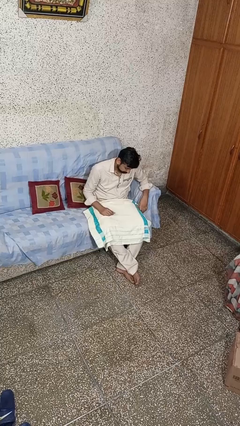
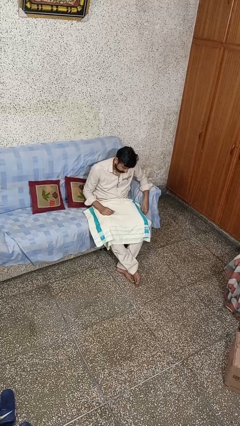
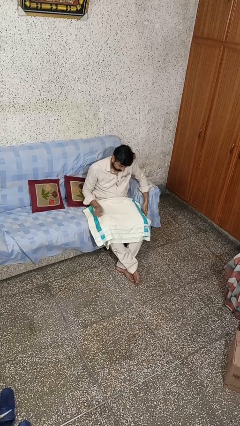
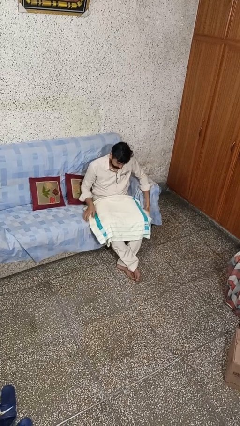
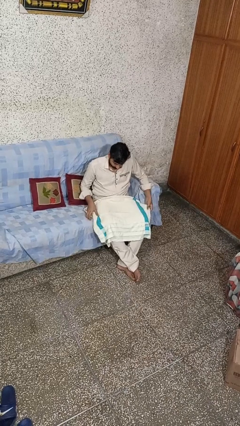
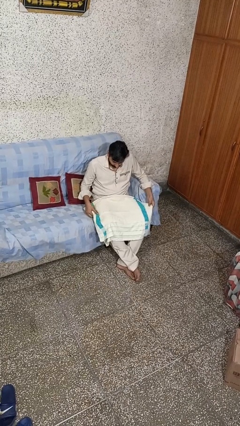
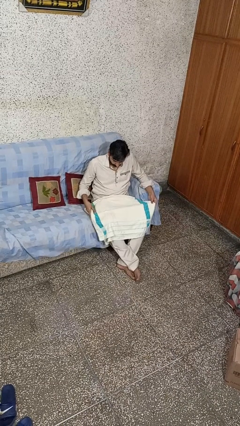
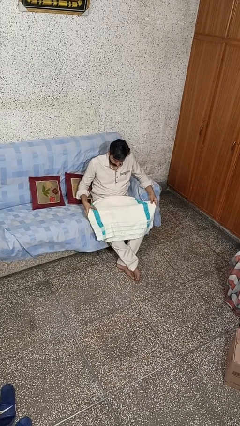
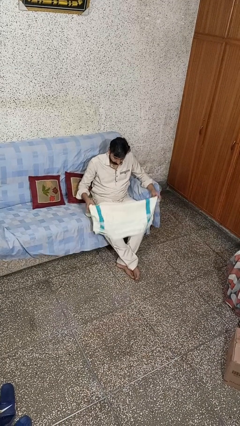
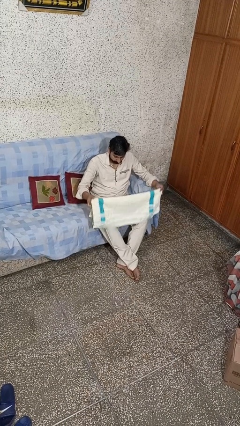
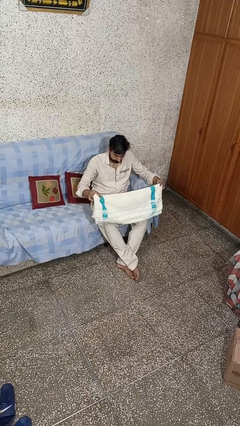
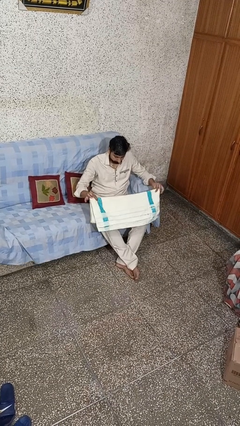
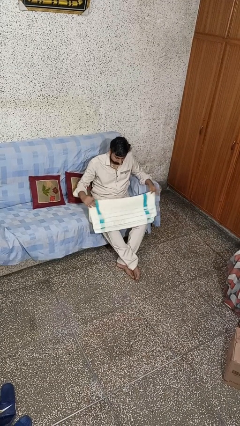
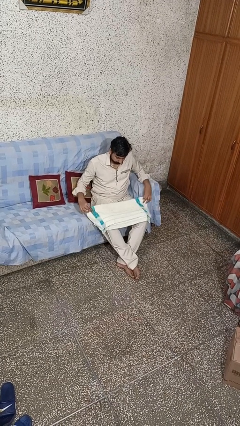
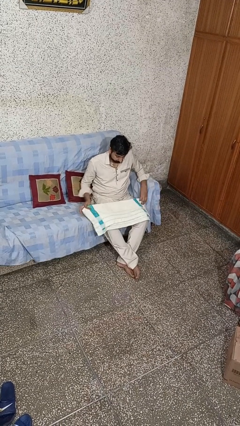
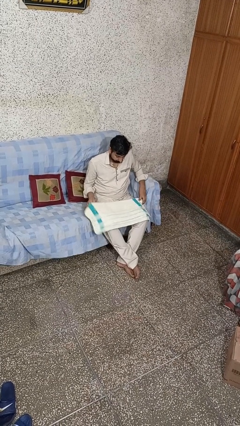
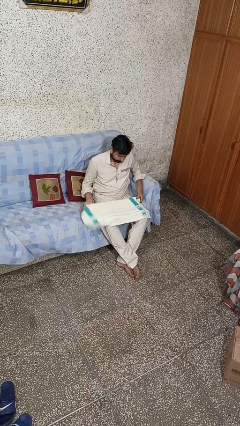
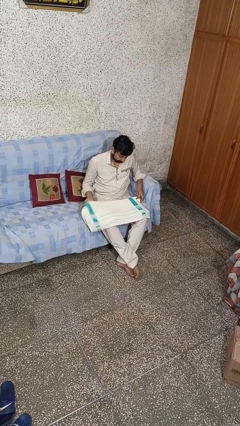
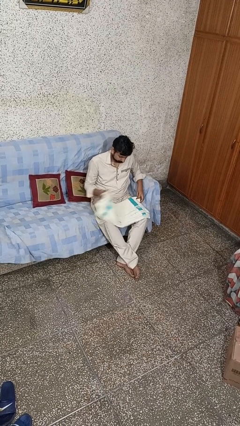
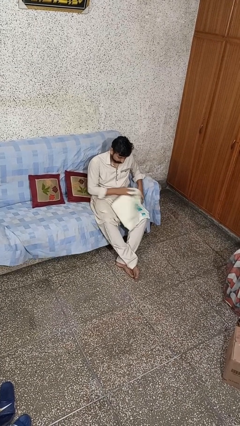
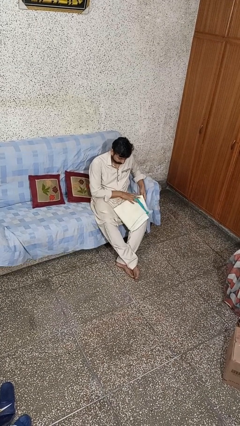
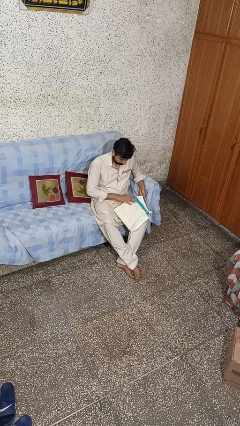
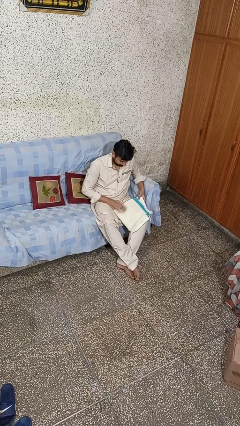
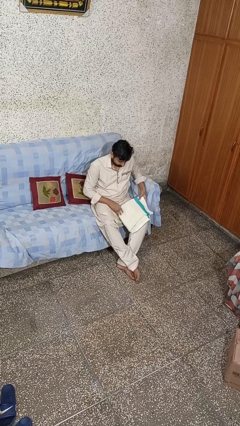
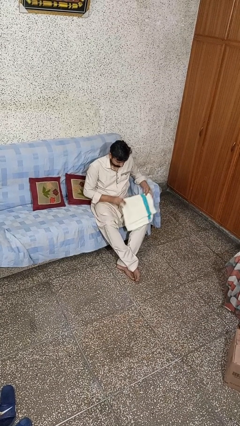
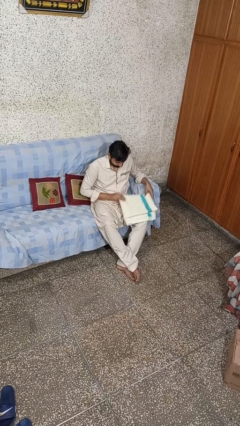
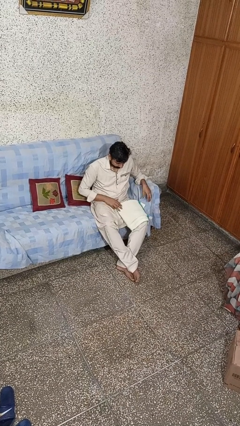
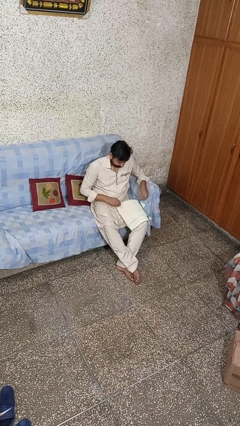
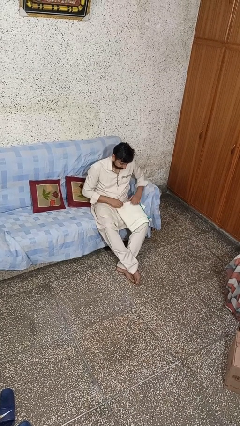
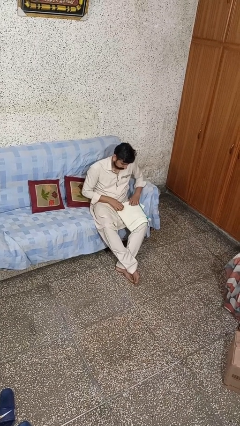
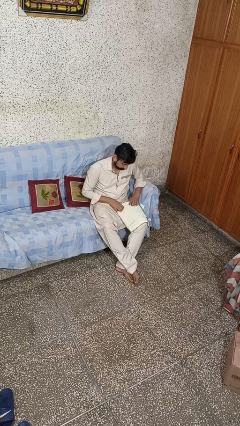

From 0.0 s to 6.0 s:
person folds towel

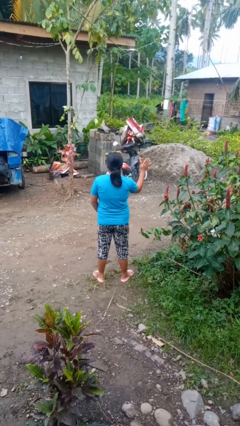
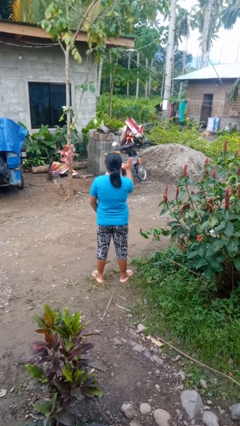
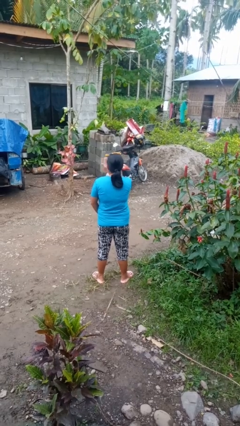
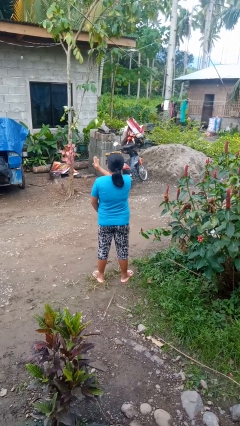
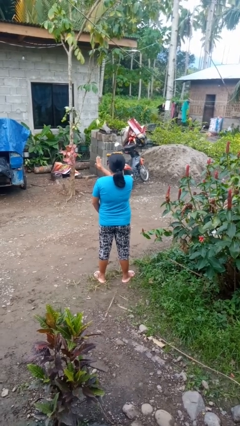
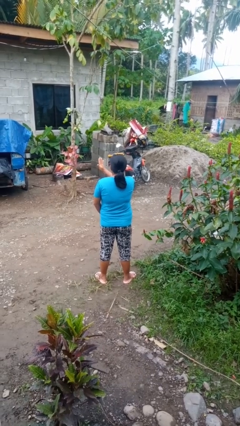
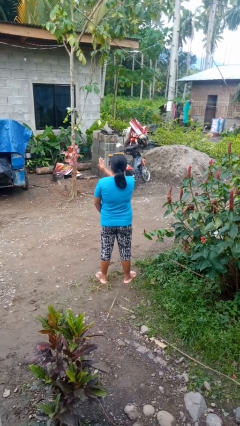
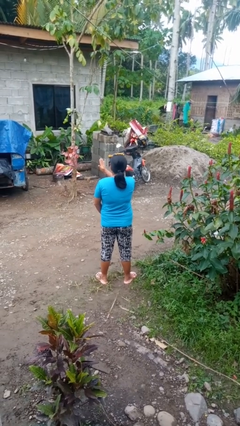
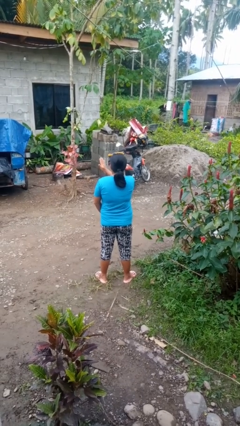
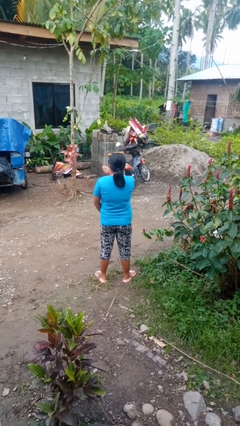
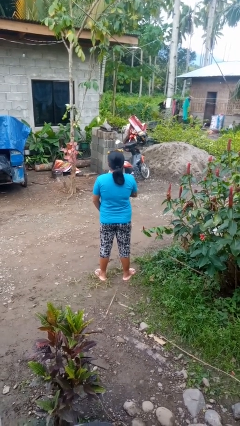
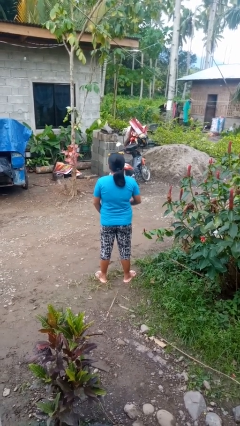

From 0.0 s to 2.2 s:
person gestures swipe left

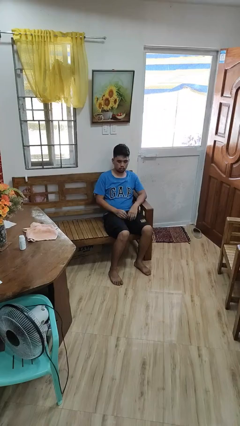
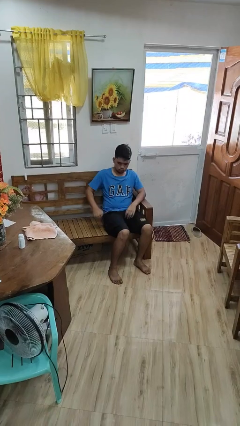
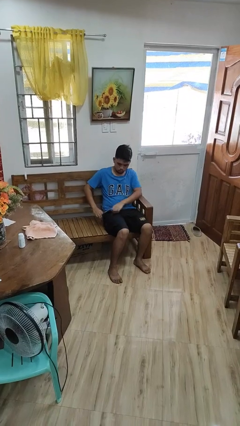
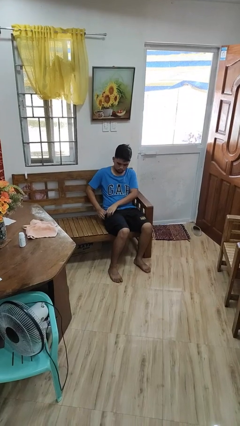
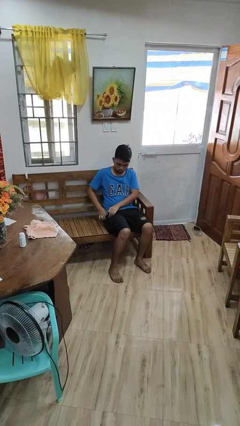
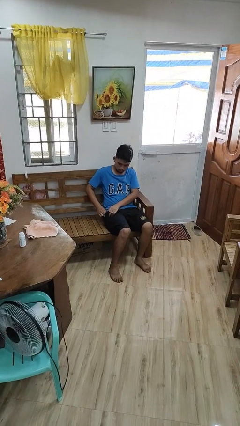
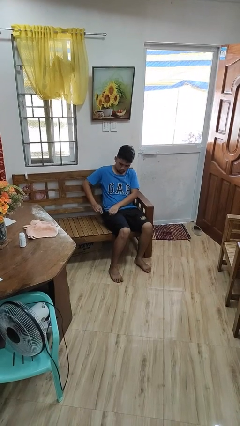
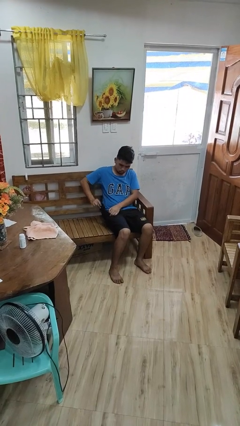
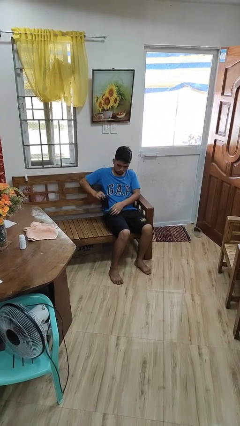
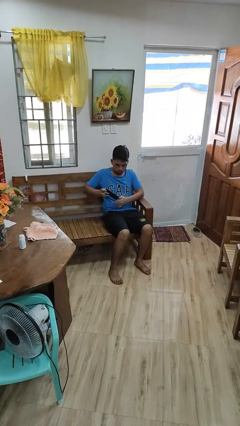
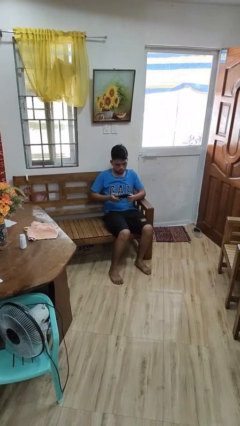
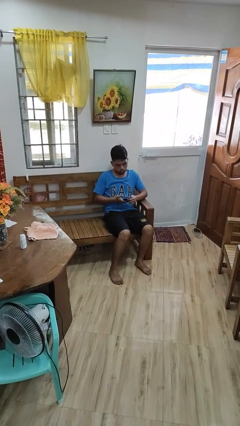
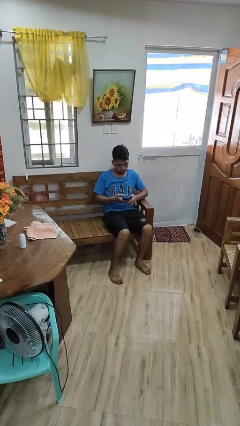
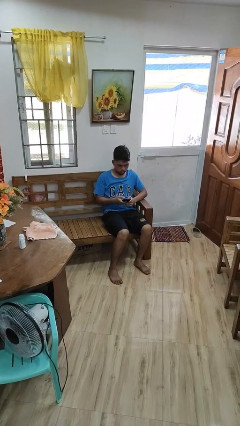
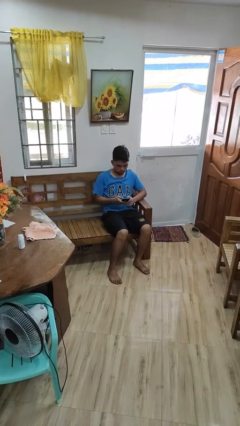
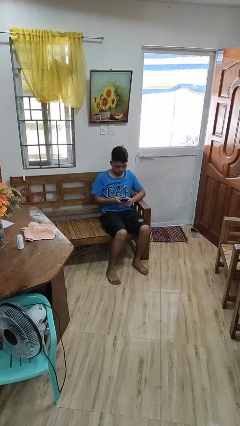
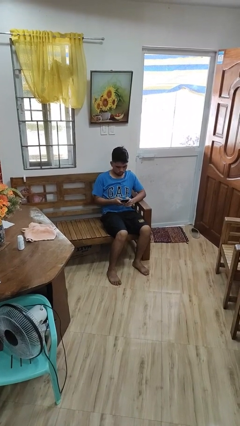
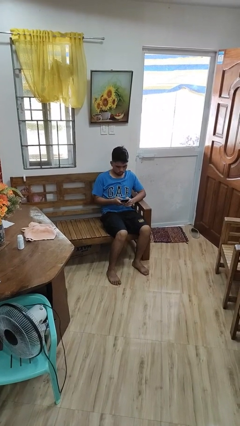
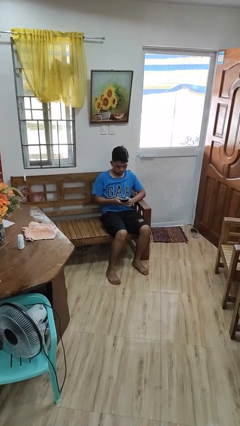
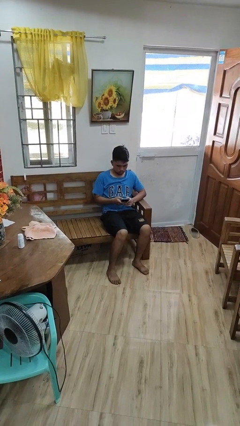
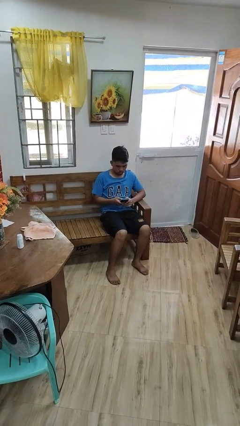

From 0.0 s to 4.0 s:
person takes phone from pocket

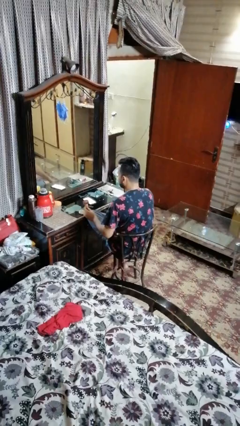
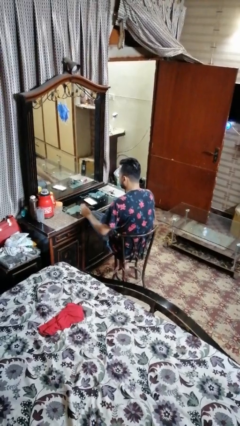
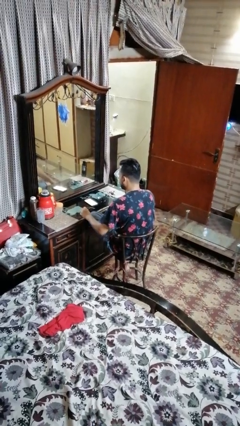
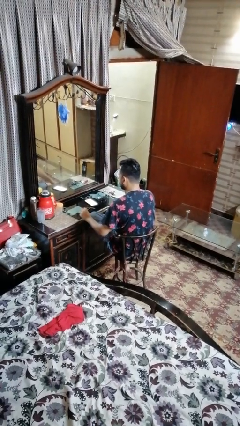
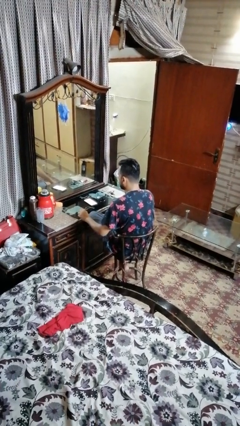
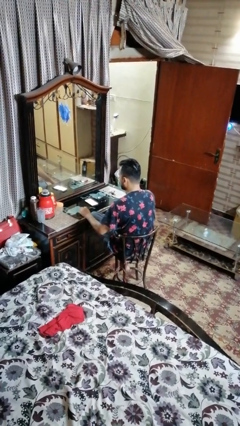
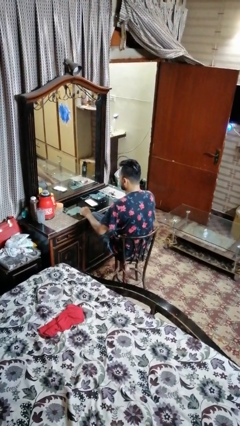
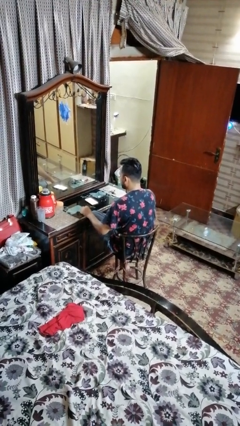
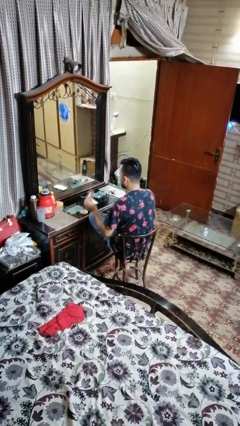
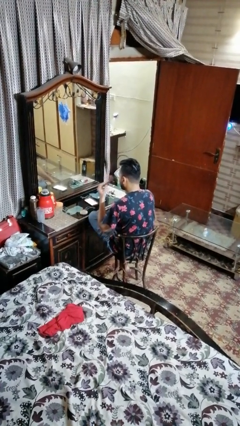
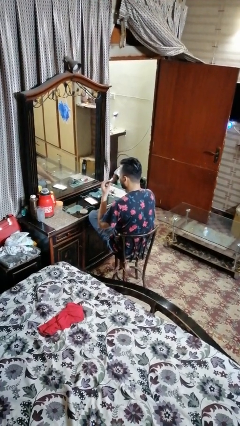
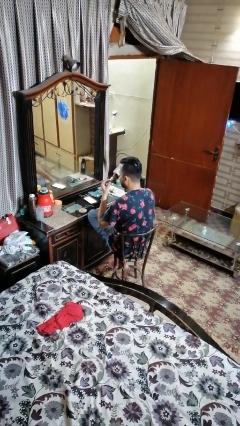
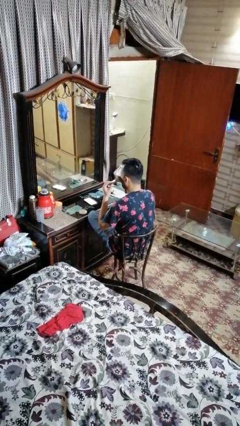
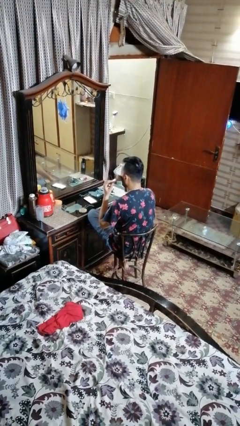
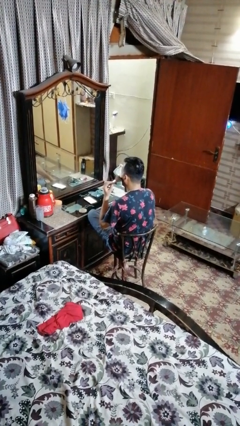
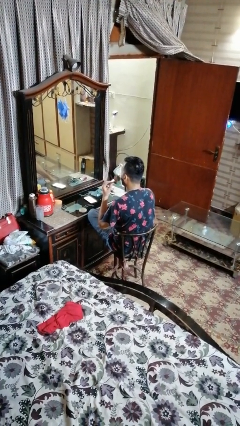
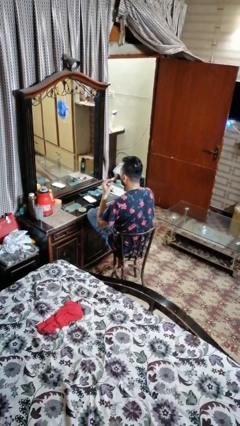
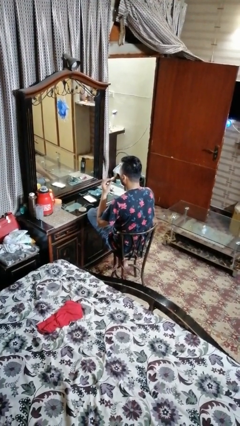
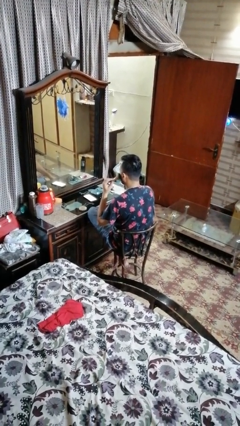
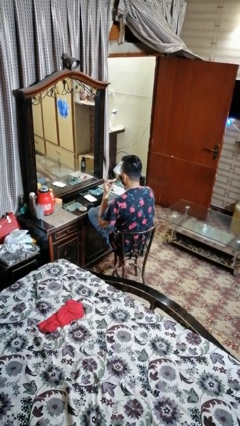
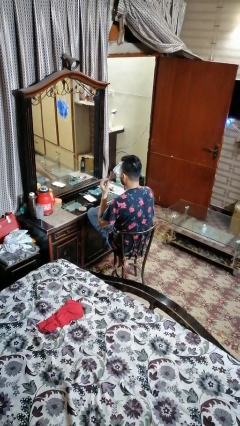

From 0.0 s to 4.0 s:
person applies foundation makeup

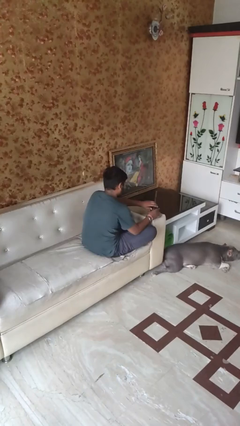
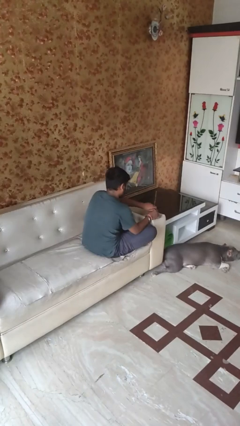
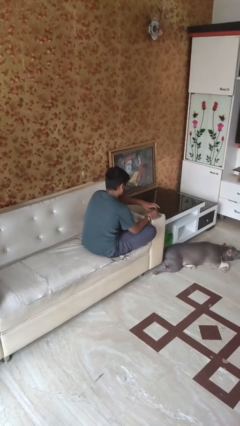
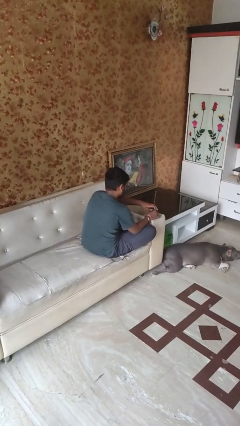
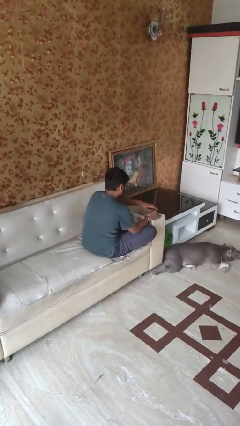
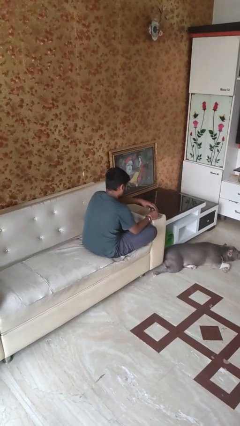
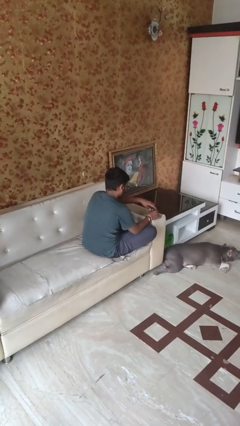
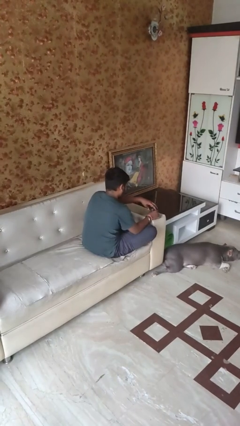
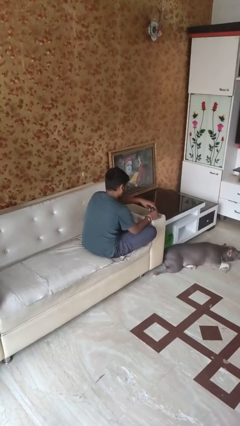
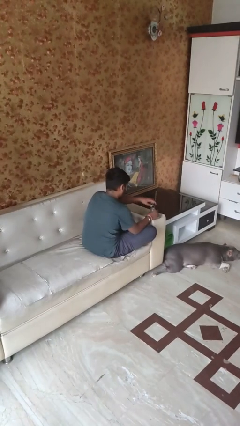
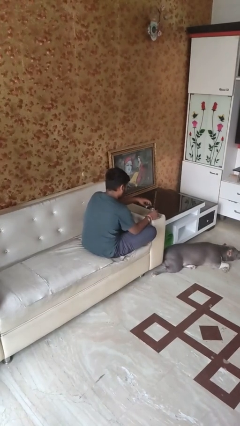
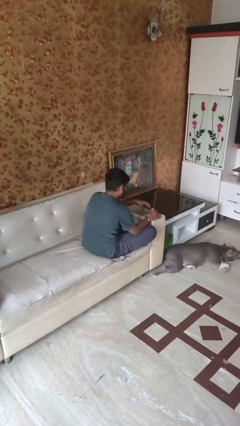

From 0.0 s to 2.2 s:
person opens jar
